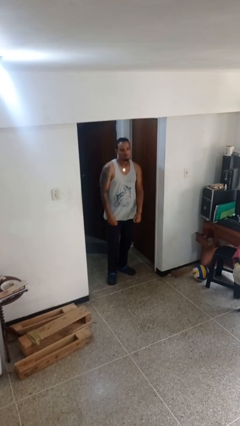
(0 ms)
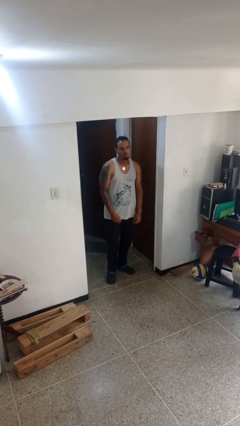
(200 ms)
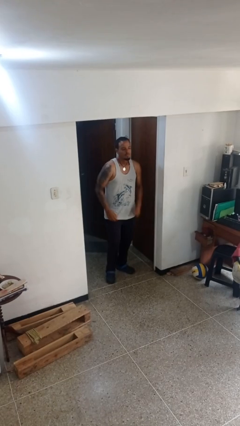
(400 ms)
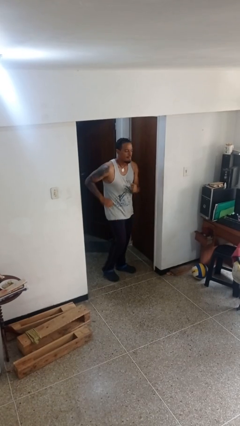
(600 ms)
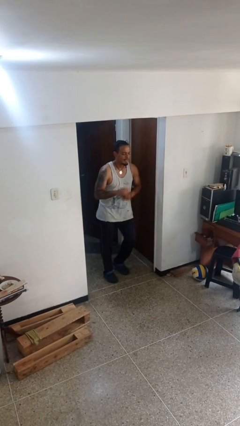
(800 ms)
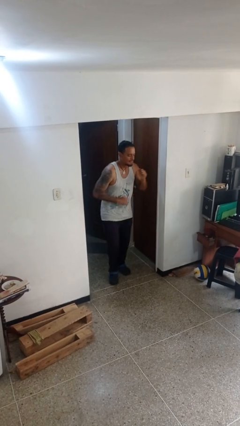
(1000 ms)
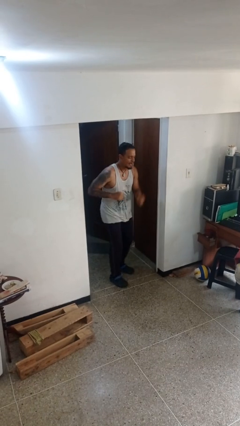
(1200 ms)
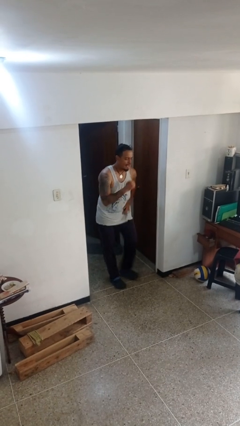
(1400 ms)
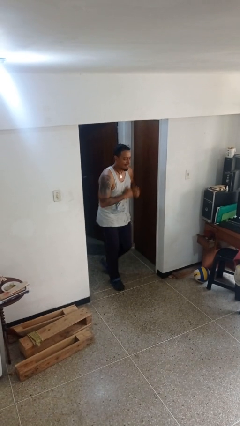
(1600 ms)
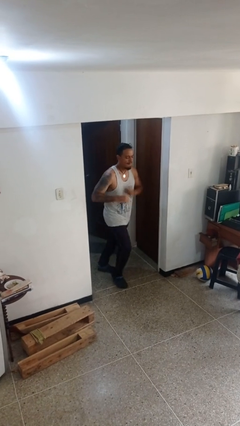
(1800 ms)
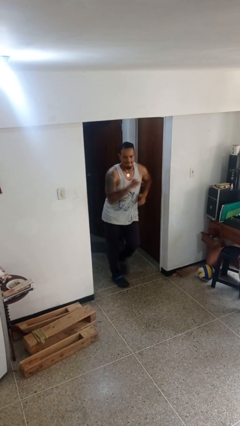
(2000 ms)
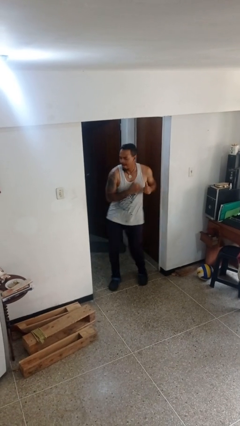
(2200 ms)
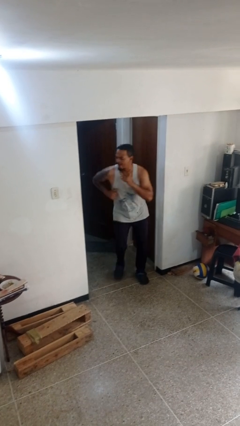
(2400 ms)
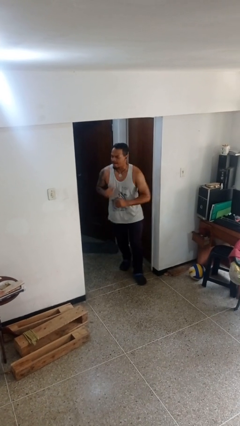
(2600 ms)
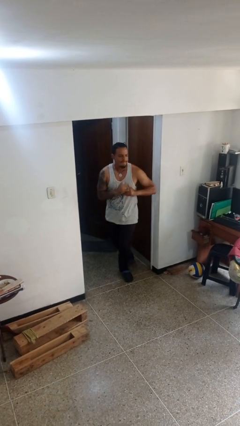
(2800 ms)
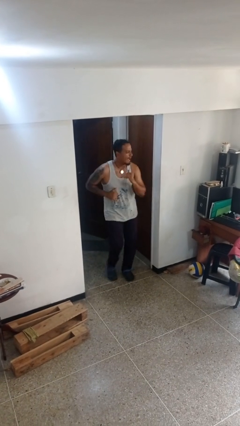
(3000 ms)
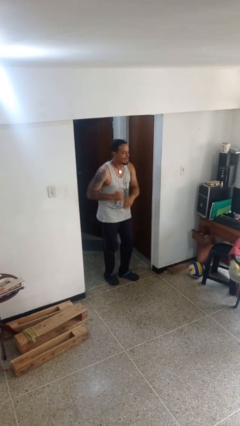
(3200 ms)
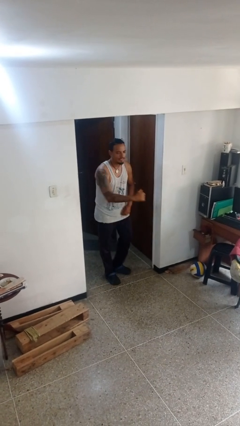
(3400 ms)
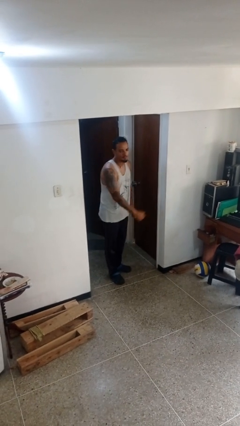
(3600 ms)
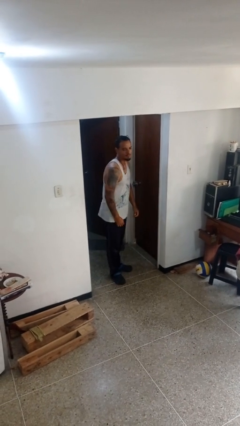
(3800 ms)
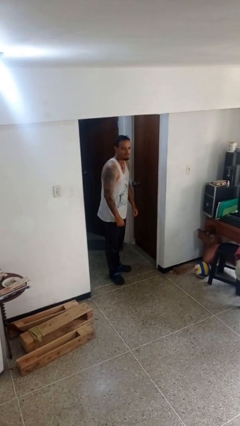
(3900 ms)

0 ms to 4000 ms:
person dances in place

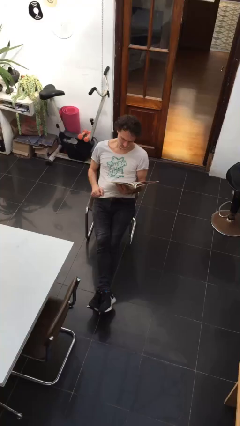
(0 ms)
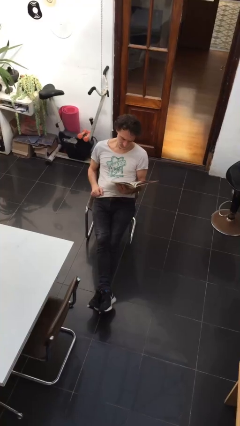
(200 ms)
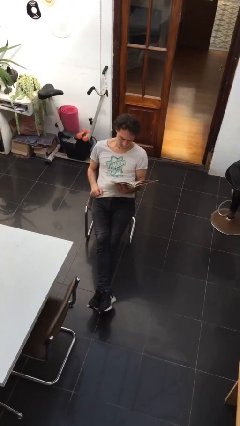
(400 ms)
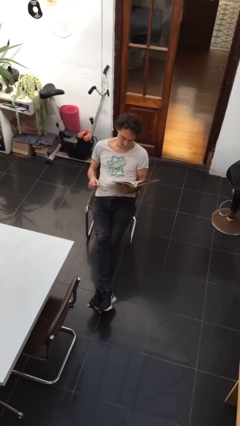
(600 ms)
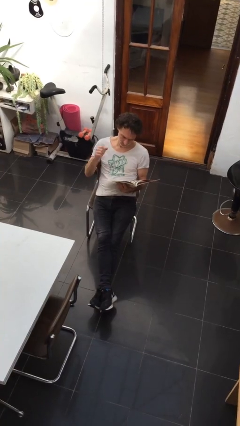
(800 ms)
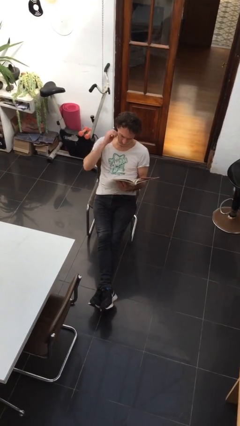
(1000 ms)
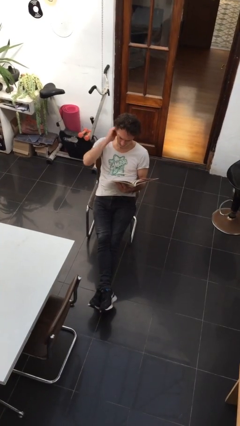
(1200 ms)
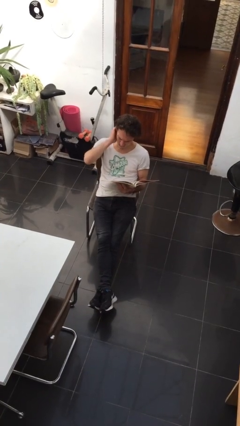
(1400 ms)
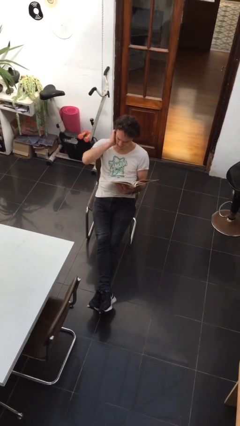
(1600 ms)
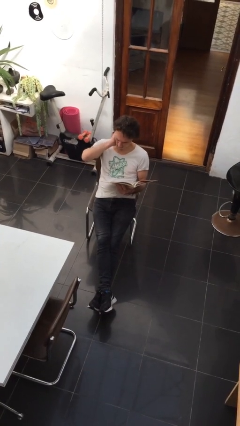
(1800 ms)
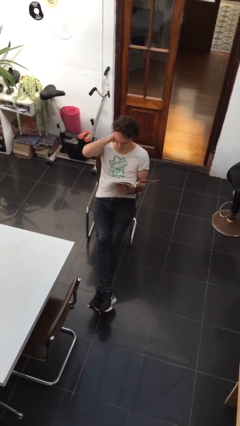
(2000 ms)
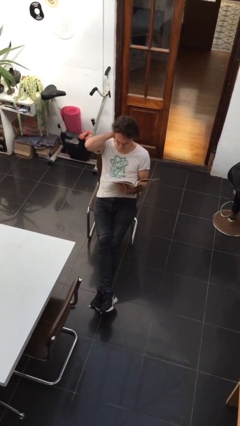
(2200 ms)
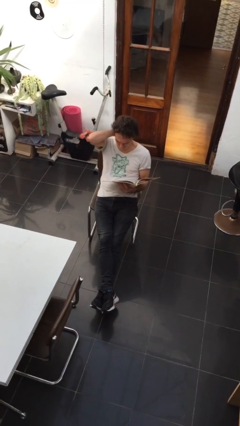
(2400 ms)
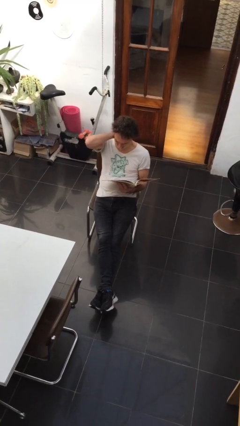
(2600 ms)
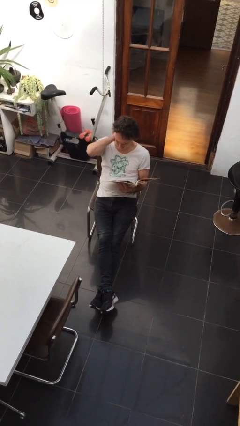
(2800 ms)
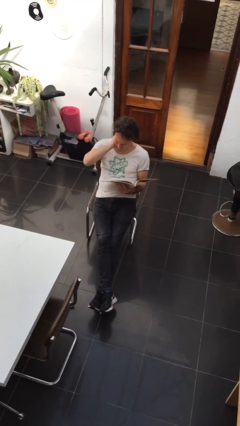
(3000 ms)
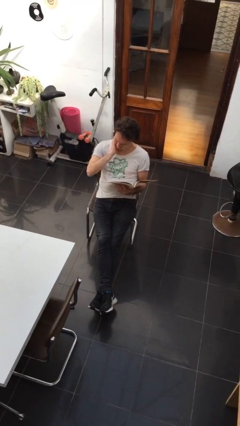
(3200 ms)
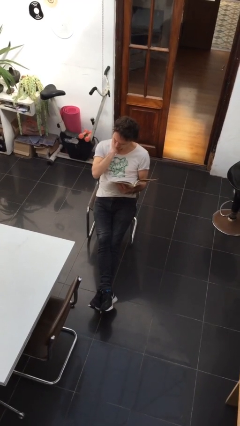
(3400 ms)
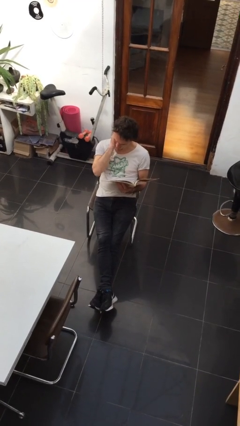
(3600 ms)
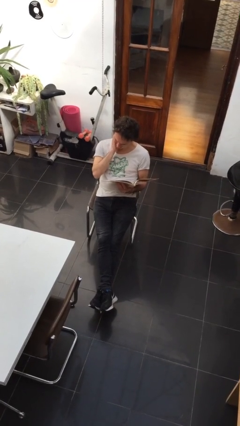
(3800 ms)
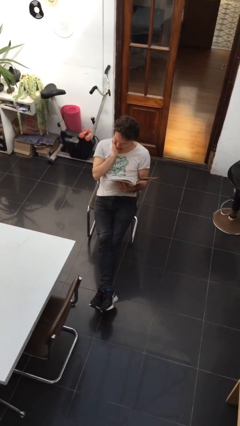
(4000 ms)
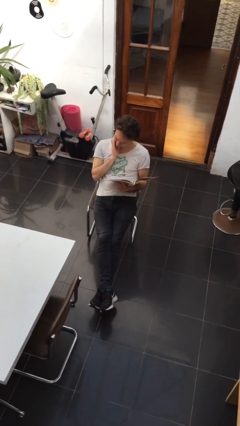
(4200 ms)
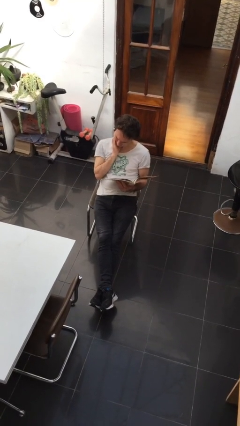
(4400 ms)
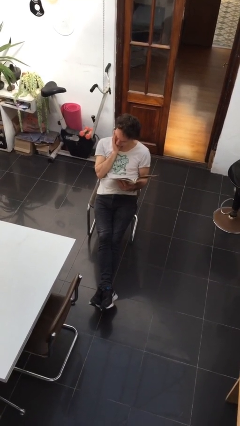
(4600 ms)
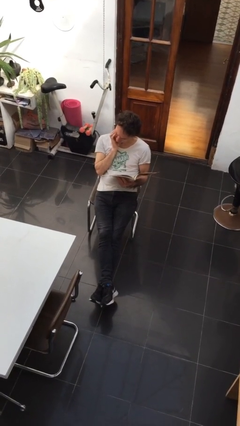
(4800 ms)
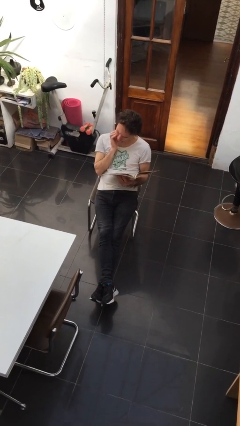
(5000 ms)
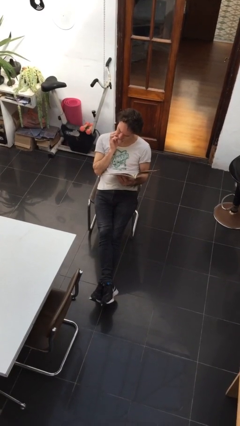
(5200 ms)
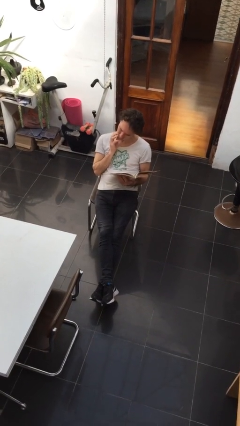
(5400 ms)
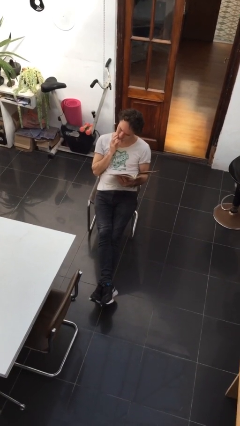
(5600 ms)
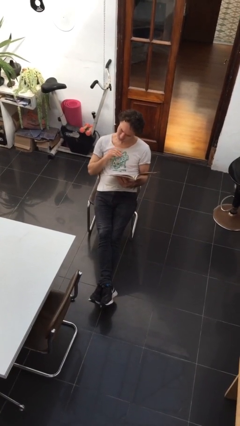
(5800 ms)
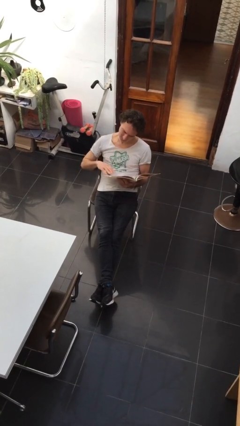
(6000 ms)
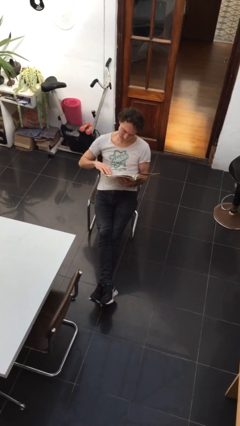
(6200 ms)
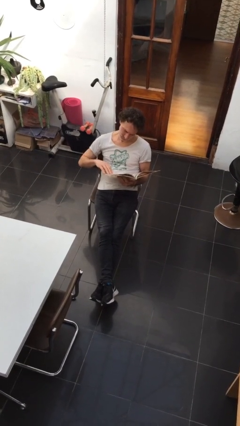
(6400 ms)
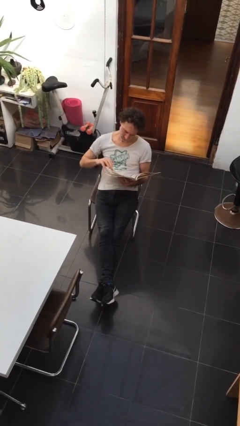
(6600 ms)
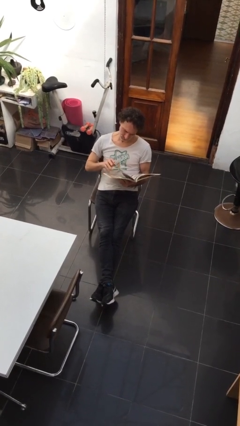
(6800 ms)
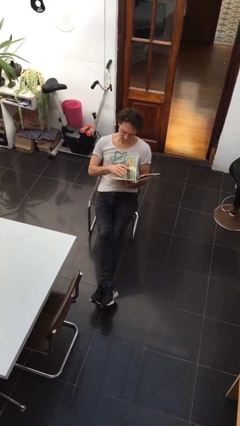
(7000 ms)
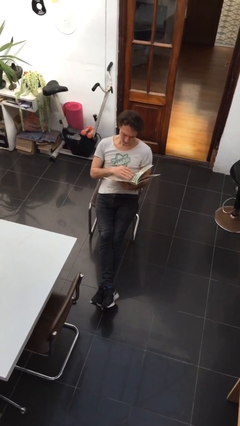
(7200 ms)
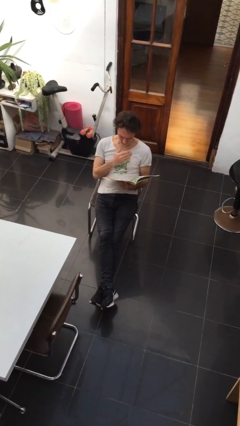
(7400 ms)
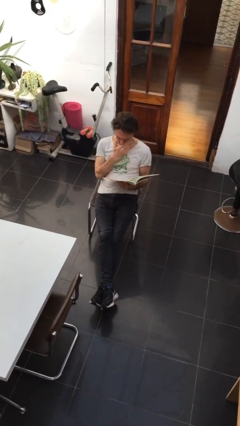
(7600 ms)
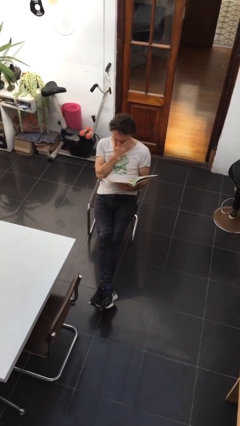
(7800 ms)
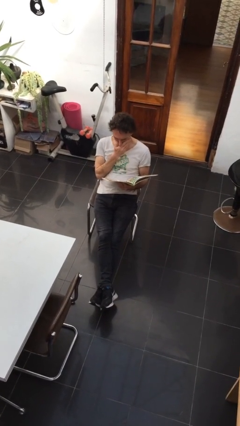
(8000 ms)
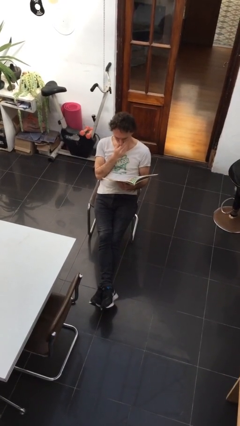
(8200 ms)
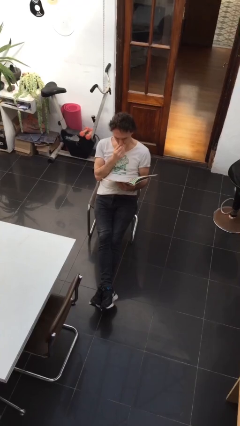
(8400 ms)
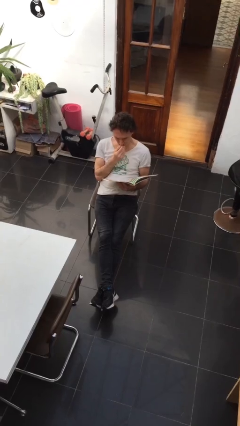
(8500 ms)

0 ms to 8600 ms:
person reads document

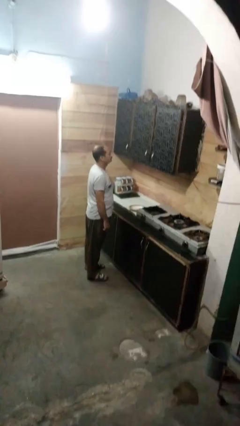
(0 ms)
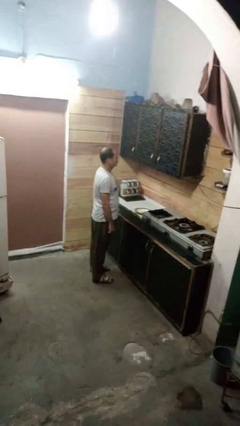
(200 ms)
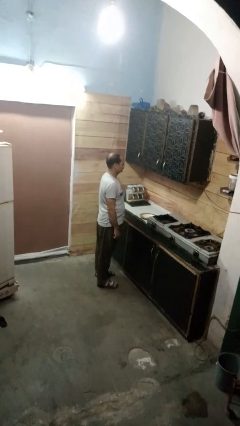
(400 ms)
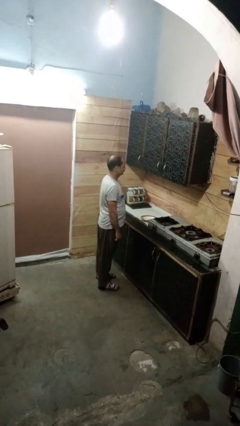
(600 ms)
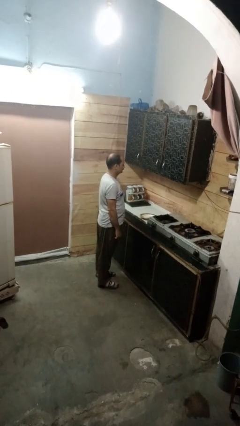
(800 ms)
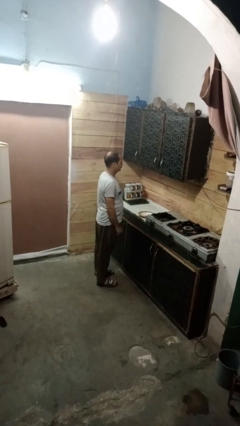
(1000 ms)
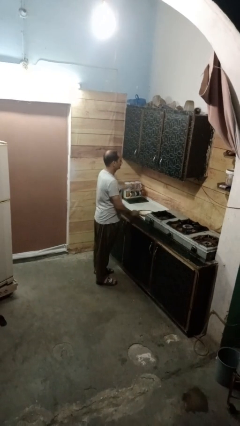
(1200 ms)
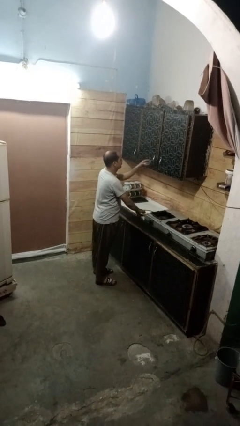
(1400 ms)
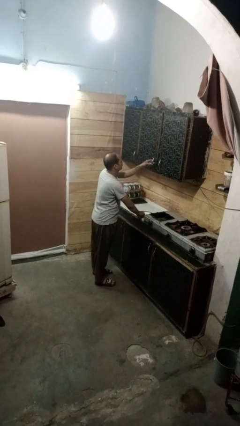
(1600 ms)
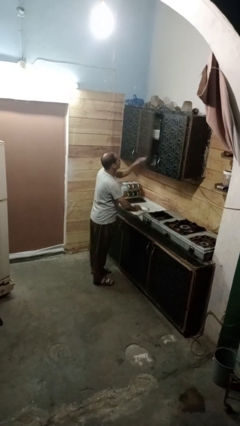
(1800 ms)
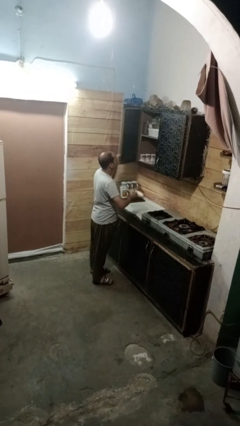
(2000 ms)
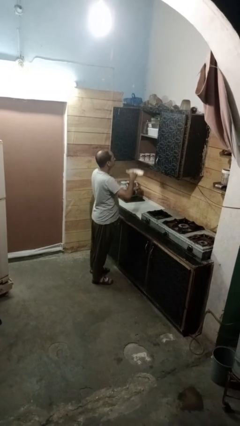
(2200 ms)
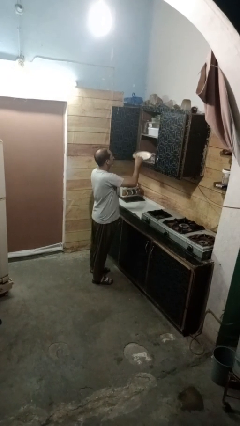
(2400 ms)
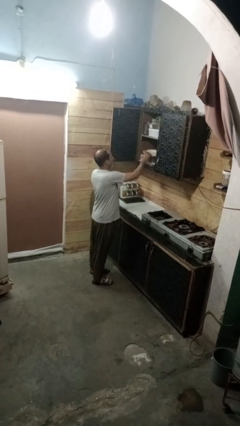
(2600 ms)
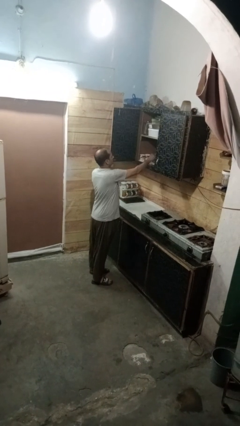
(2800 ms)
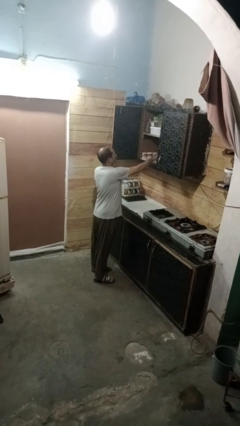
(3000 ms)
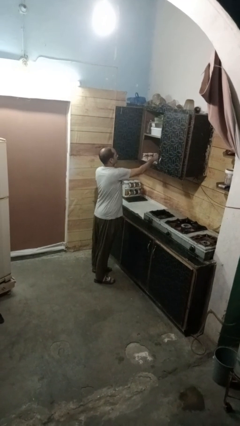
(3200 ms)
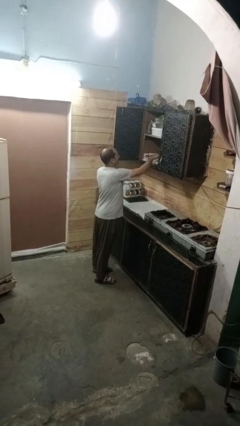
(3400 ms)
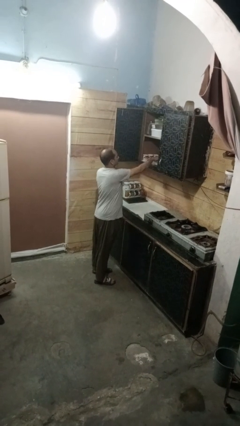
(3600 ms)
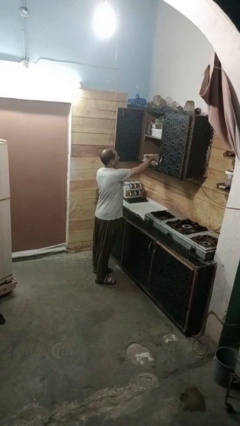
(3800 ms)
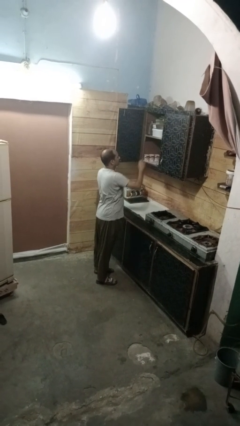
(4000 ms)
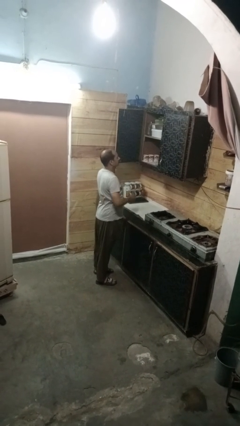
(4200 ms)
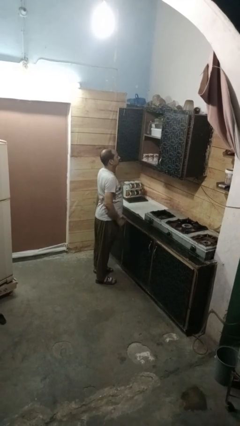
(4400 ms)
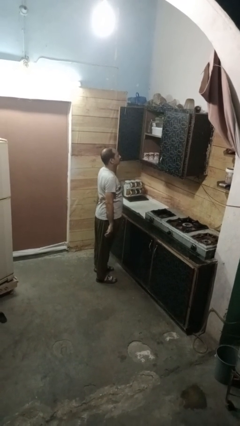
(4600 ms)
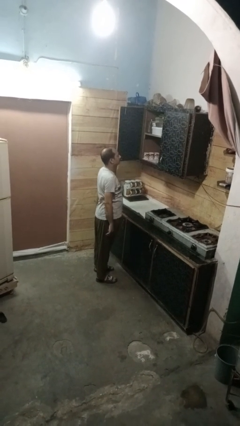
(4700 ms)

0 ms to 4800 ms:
person puts object in cabinet

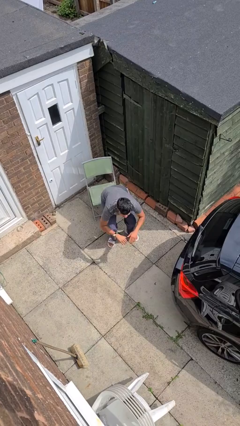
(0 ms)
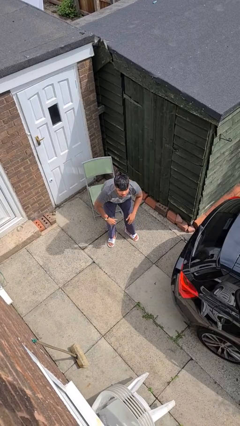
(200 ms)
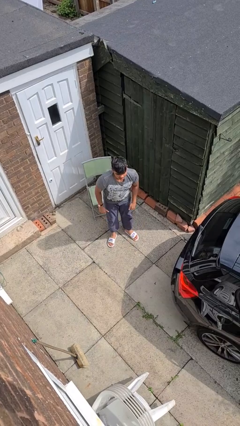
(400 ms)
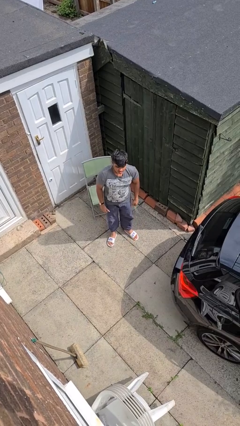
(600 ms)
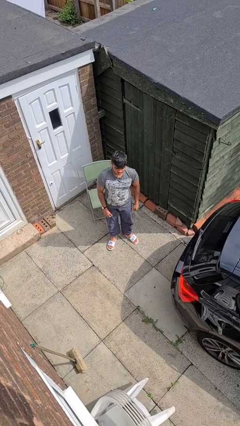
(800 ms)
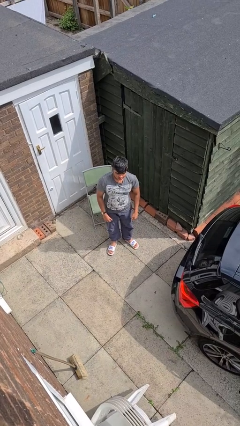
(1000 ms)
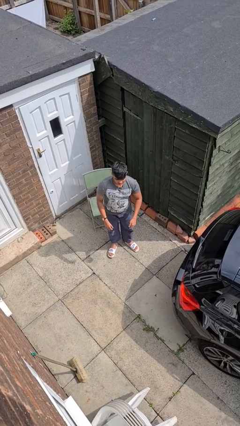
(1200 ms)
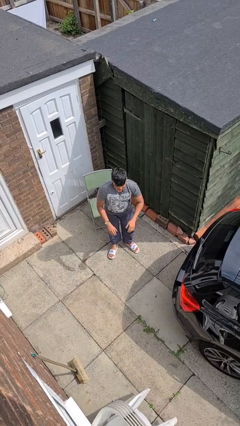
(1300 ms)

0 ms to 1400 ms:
person stands up
